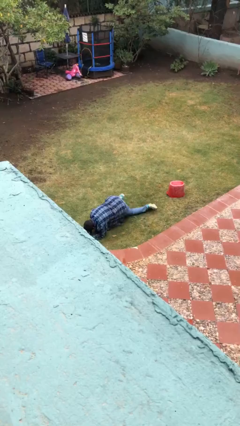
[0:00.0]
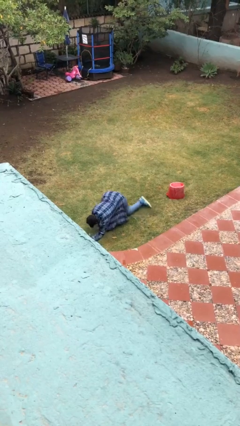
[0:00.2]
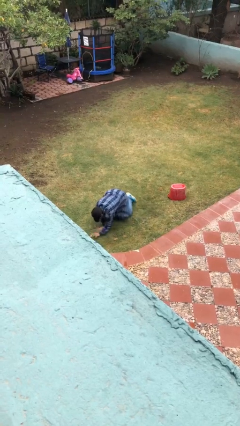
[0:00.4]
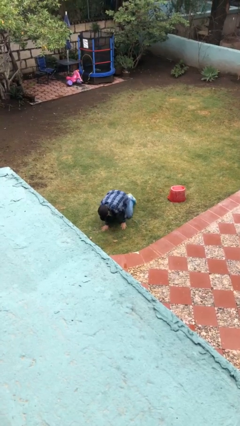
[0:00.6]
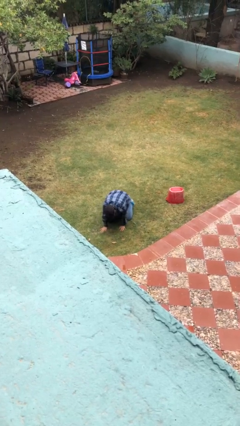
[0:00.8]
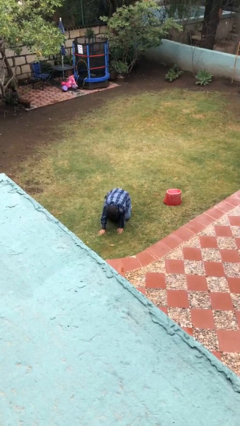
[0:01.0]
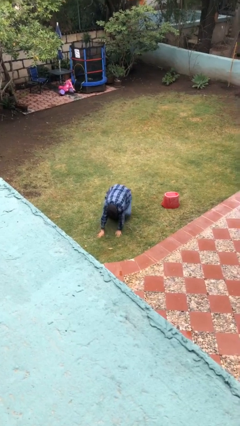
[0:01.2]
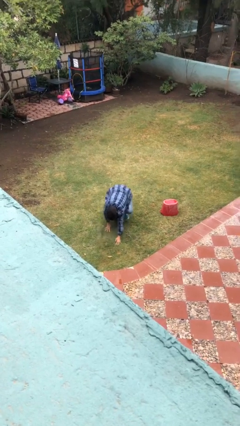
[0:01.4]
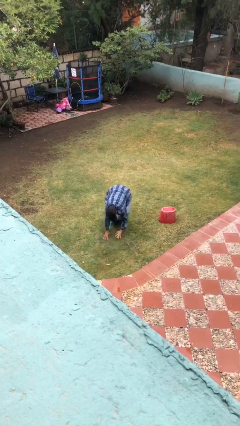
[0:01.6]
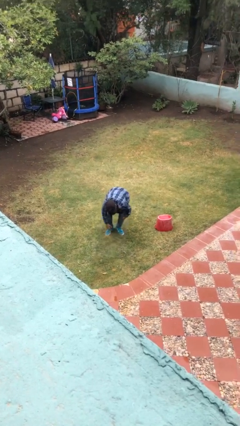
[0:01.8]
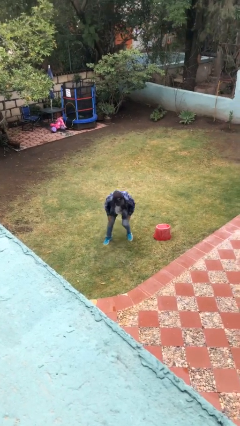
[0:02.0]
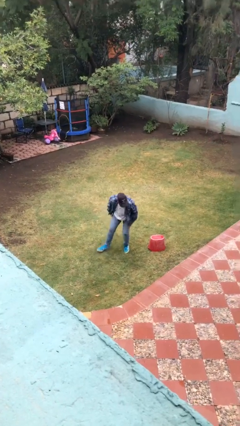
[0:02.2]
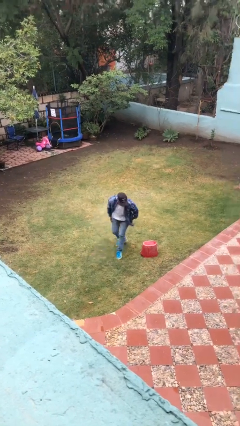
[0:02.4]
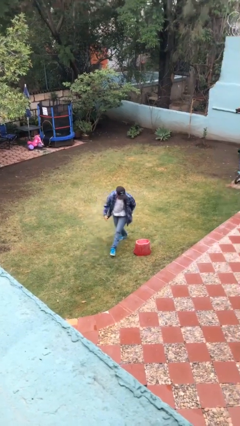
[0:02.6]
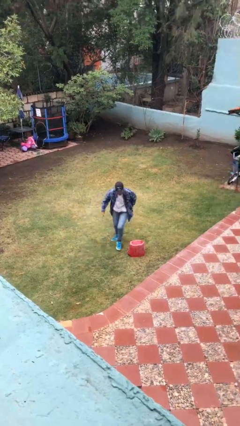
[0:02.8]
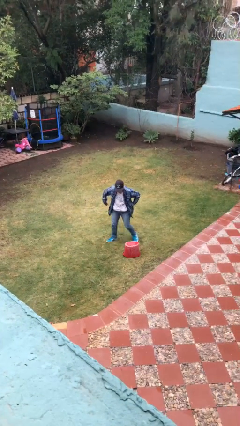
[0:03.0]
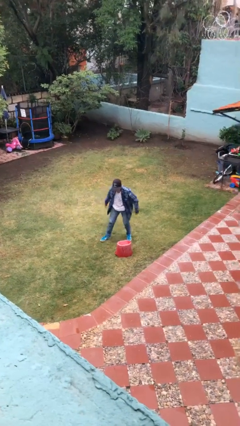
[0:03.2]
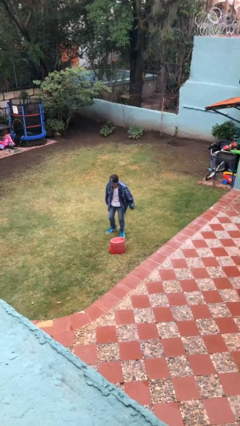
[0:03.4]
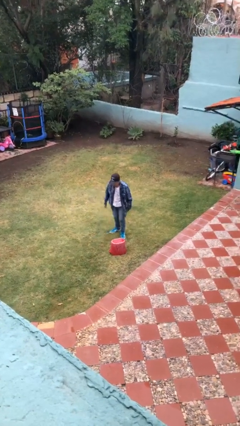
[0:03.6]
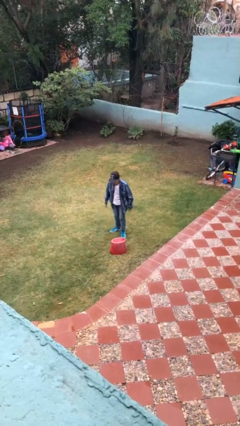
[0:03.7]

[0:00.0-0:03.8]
person stands up from floor

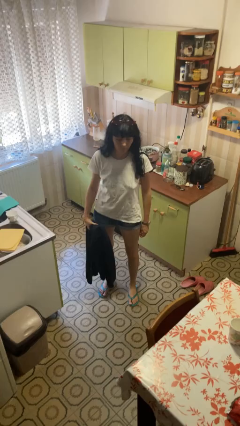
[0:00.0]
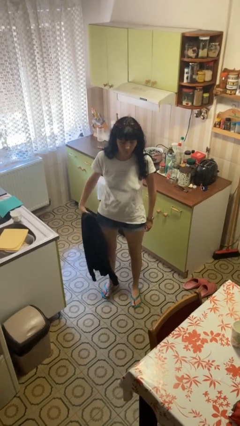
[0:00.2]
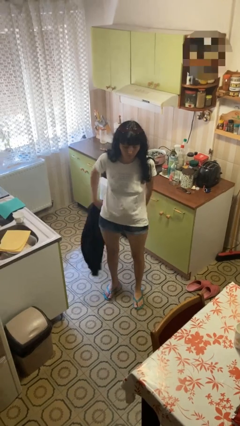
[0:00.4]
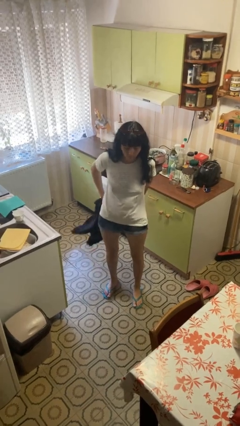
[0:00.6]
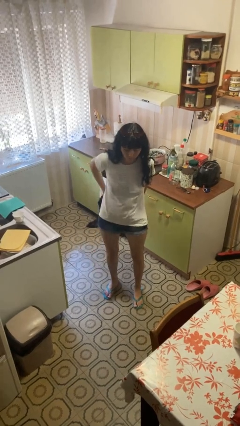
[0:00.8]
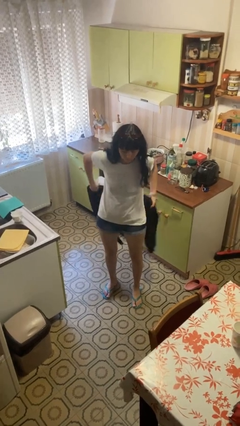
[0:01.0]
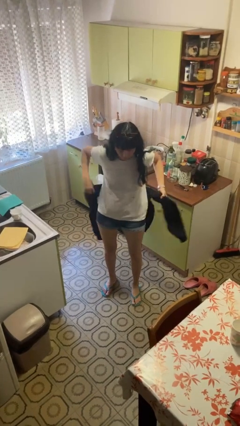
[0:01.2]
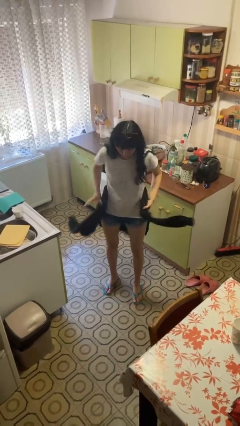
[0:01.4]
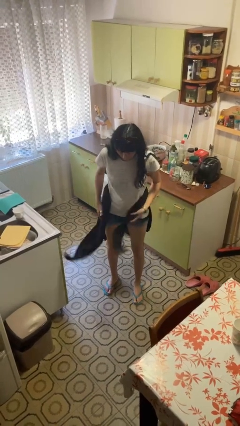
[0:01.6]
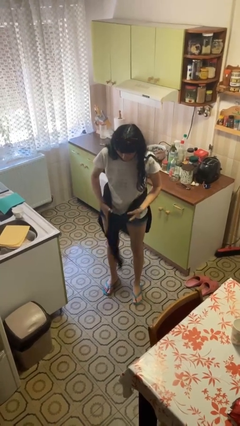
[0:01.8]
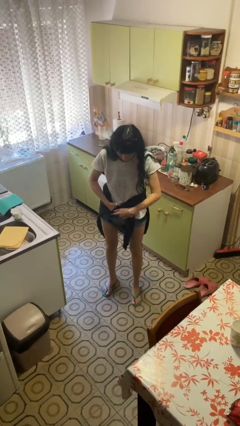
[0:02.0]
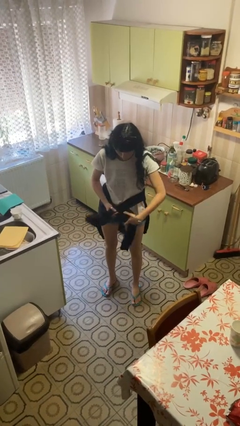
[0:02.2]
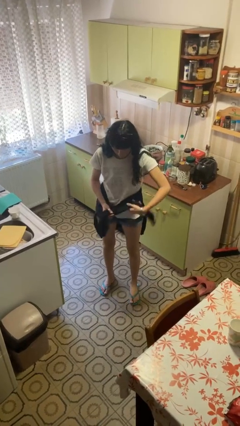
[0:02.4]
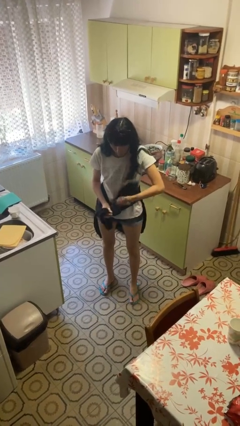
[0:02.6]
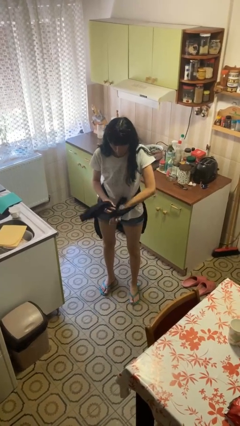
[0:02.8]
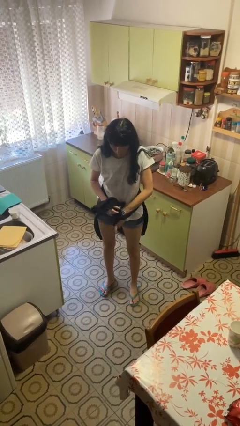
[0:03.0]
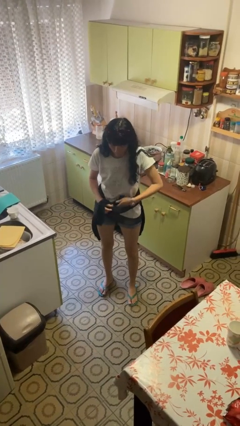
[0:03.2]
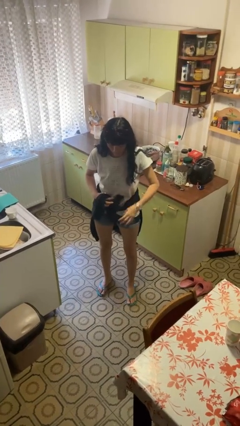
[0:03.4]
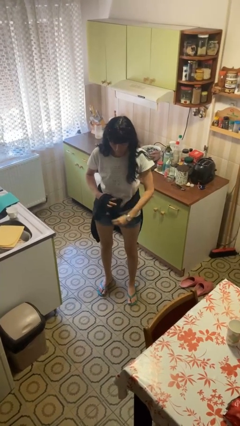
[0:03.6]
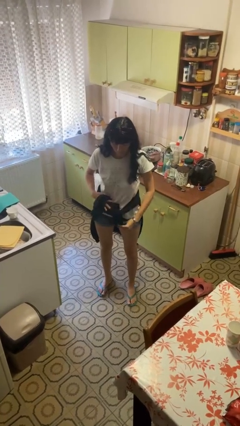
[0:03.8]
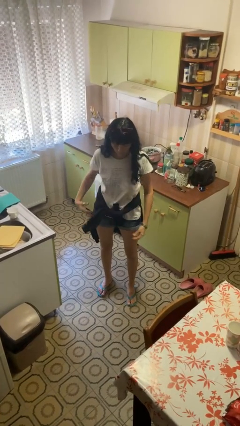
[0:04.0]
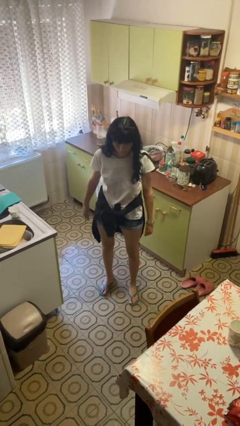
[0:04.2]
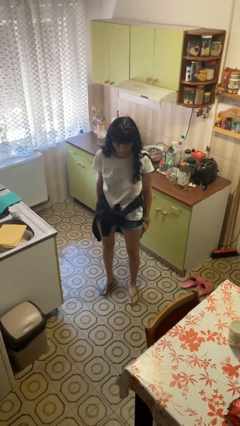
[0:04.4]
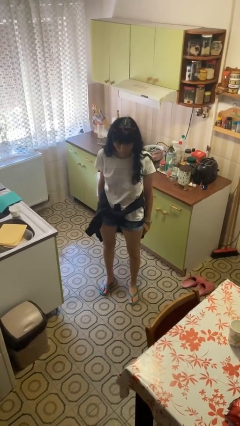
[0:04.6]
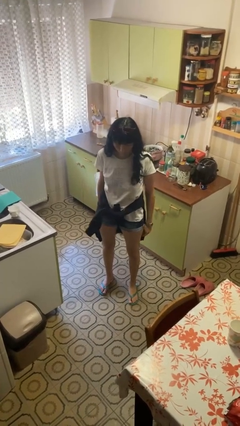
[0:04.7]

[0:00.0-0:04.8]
person ties jacket around waist

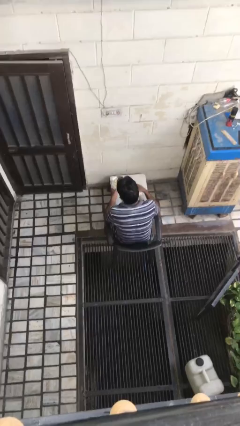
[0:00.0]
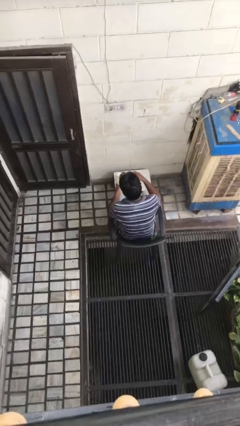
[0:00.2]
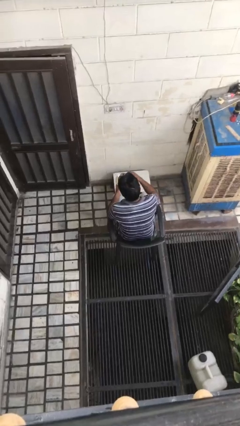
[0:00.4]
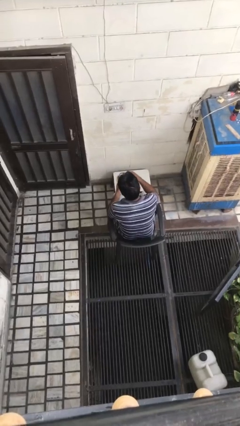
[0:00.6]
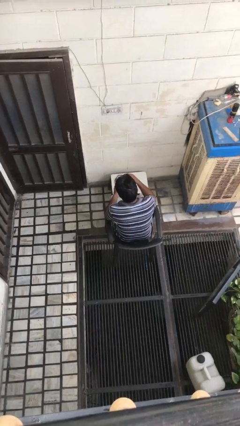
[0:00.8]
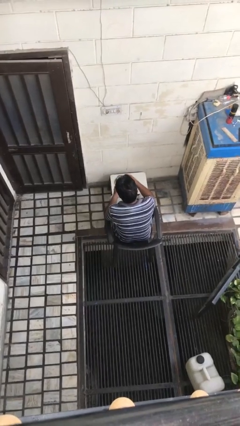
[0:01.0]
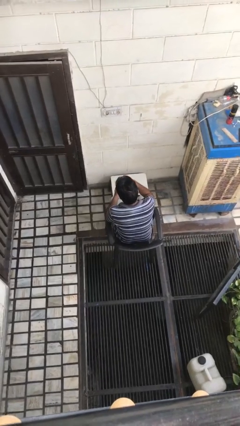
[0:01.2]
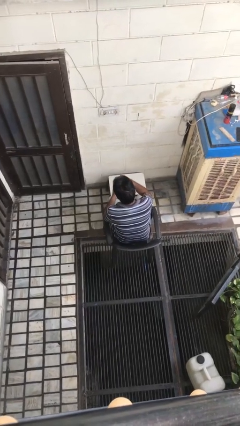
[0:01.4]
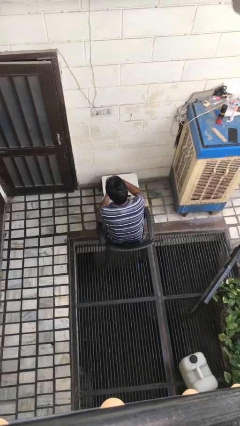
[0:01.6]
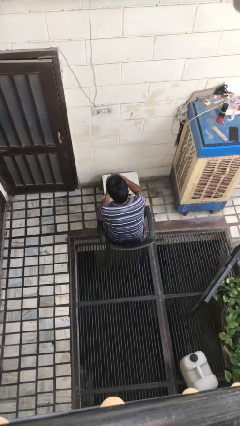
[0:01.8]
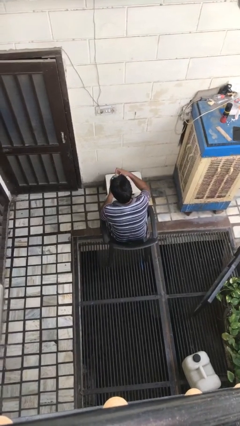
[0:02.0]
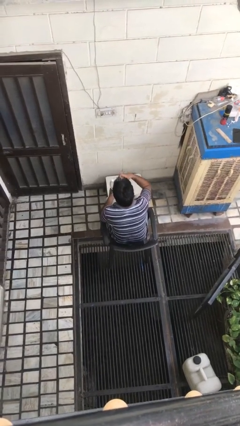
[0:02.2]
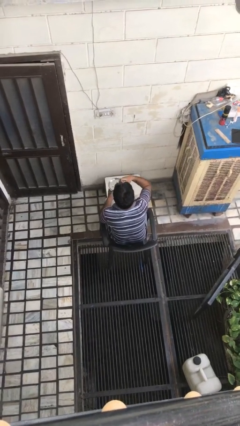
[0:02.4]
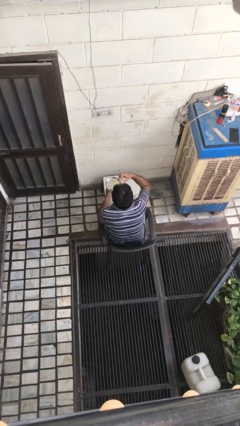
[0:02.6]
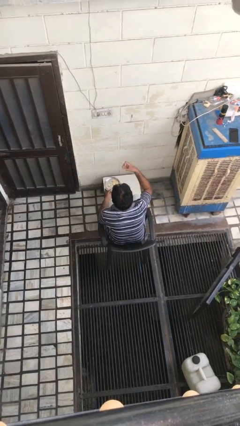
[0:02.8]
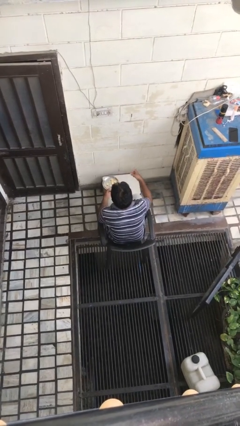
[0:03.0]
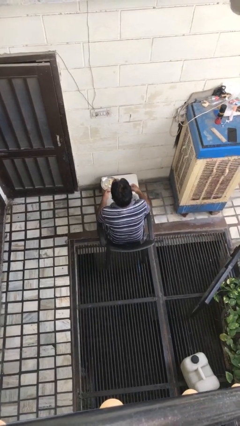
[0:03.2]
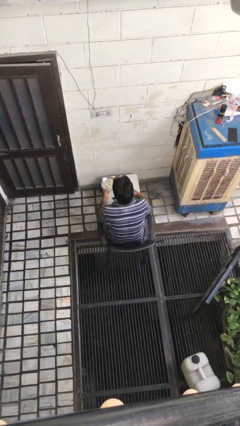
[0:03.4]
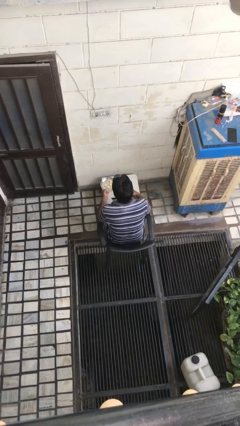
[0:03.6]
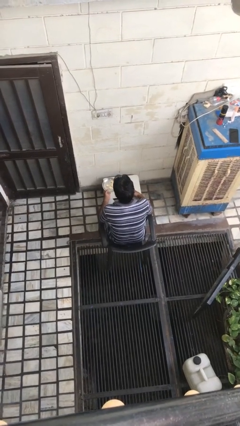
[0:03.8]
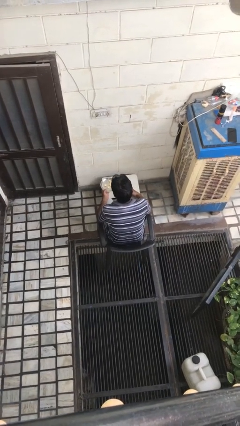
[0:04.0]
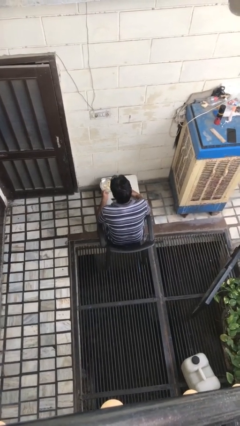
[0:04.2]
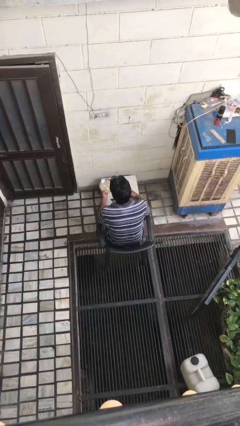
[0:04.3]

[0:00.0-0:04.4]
person eats with hands

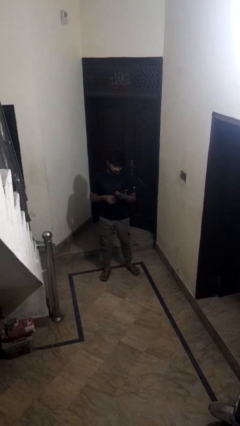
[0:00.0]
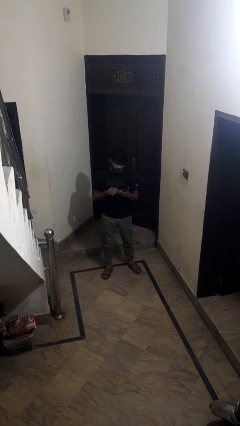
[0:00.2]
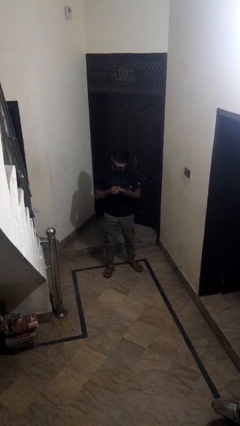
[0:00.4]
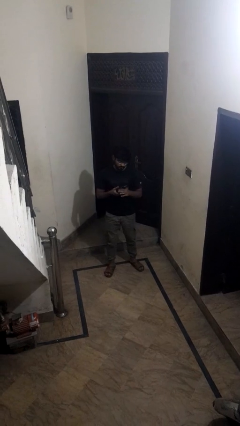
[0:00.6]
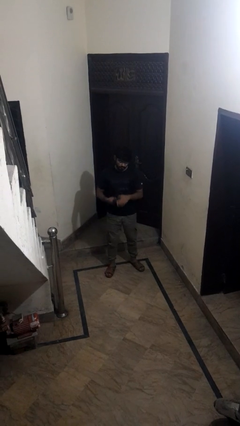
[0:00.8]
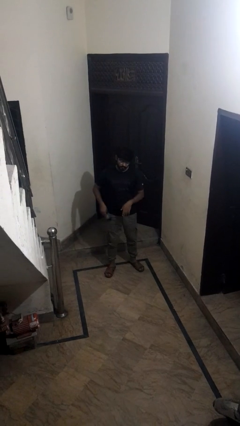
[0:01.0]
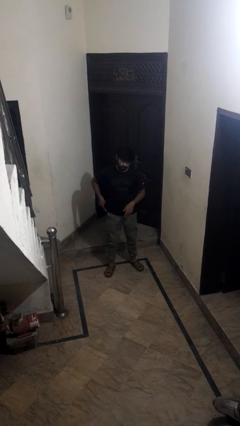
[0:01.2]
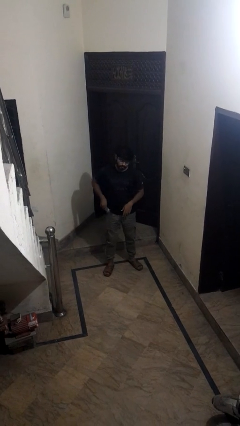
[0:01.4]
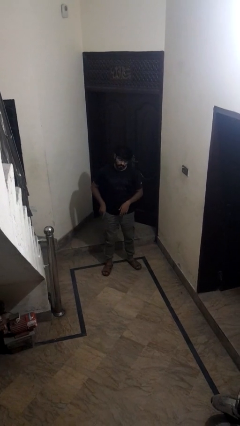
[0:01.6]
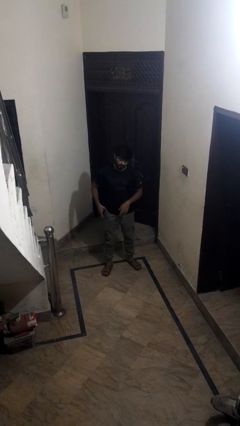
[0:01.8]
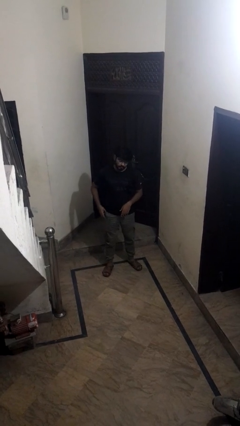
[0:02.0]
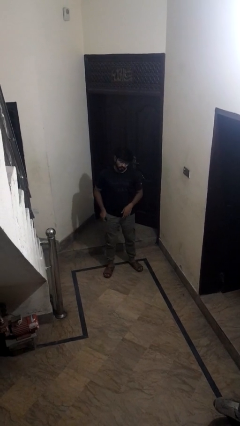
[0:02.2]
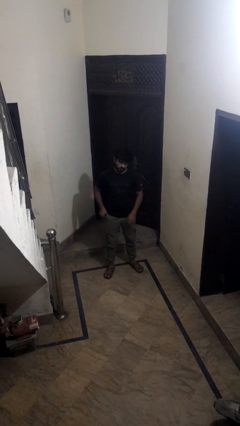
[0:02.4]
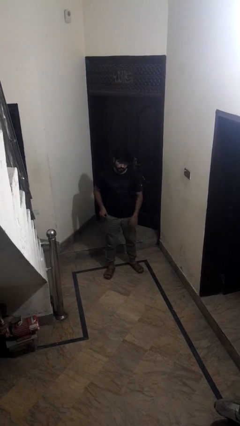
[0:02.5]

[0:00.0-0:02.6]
person puts phone into pocket

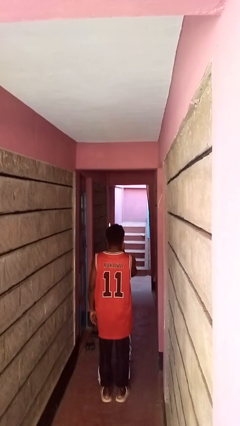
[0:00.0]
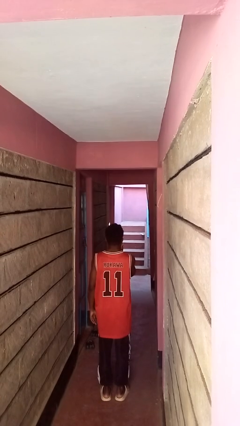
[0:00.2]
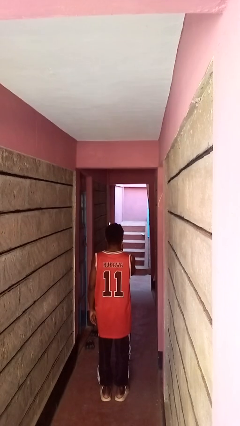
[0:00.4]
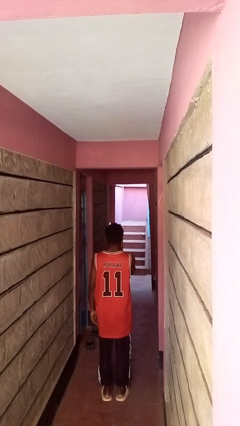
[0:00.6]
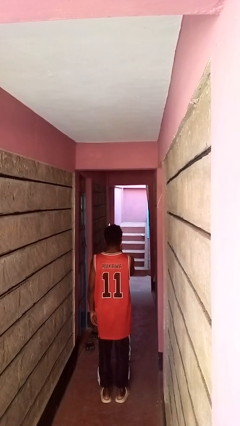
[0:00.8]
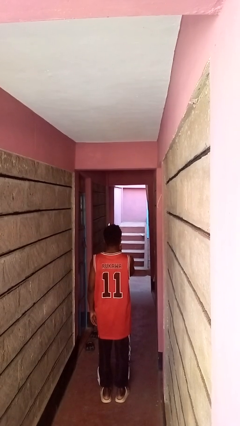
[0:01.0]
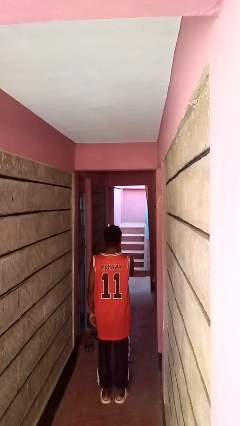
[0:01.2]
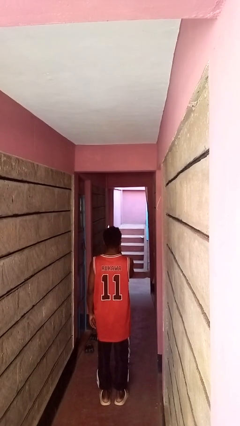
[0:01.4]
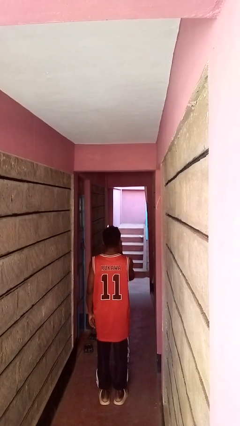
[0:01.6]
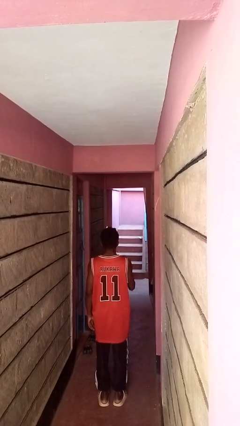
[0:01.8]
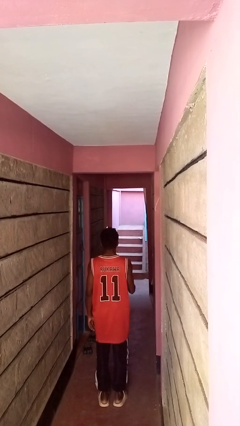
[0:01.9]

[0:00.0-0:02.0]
person rubs eyes

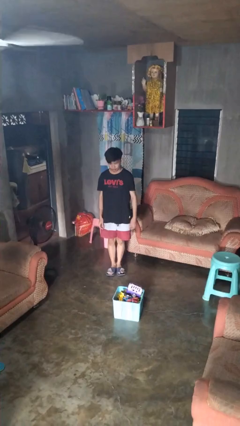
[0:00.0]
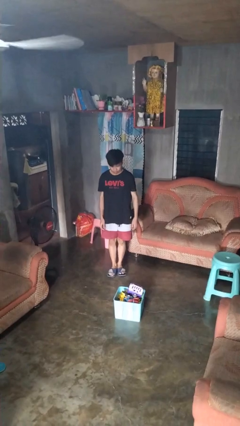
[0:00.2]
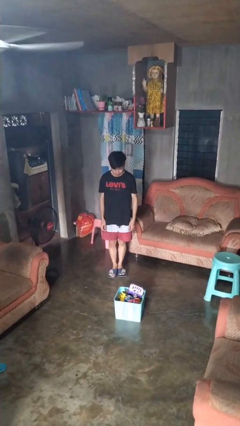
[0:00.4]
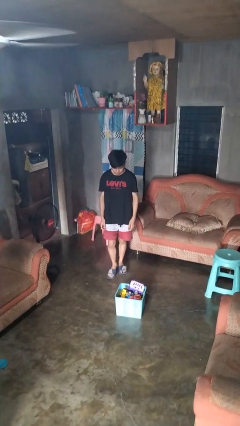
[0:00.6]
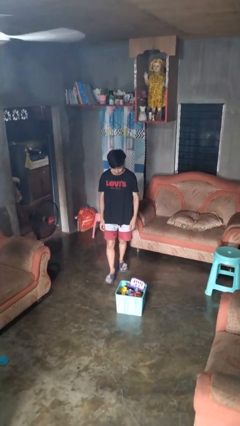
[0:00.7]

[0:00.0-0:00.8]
person trips on object on floor
